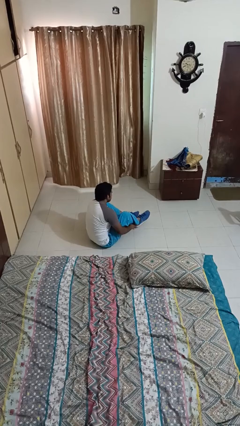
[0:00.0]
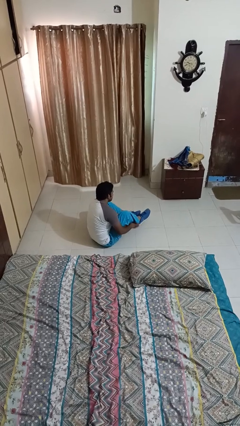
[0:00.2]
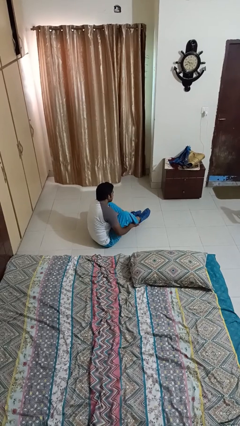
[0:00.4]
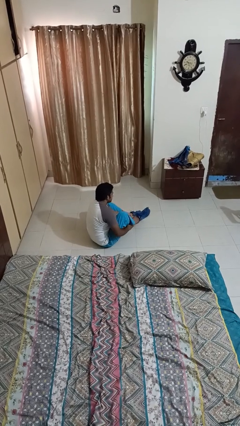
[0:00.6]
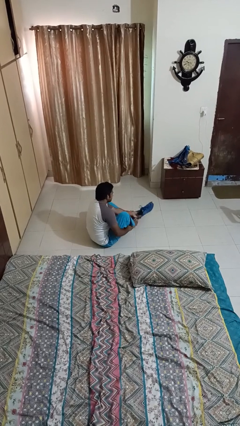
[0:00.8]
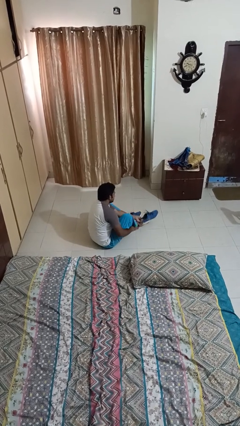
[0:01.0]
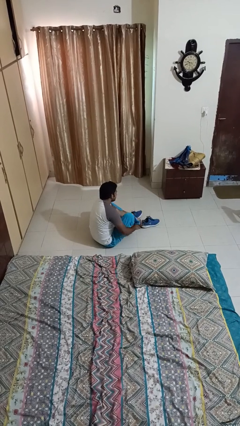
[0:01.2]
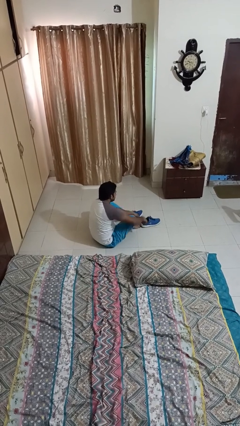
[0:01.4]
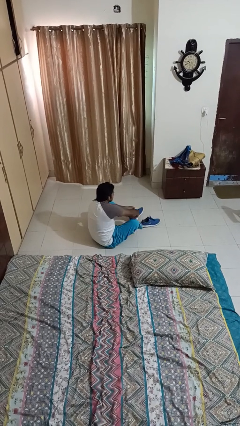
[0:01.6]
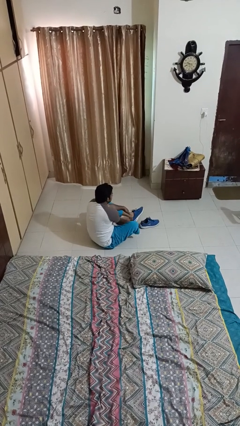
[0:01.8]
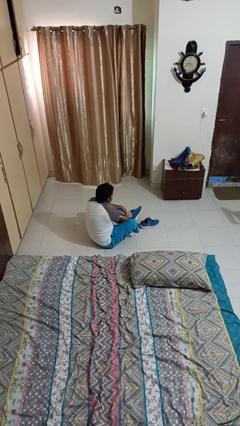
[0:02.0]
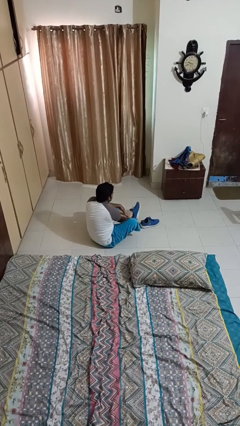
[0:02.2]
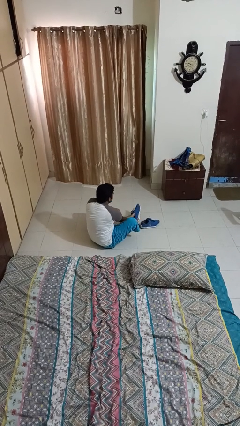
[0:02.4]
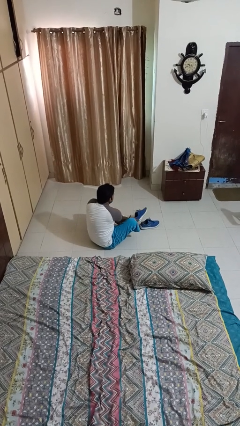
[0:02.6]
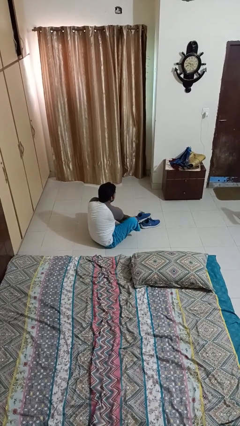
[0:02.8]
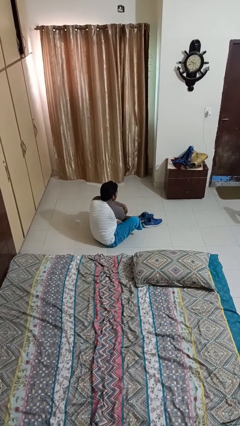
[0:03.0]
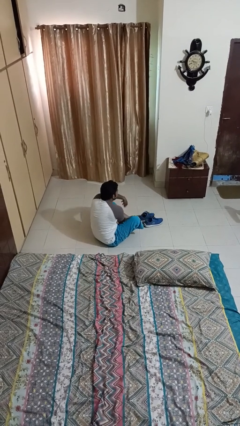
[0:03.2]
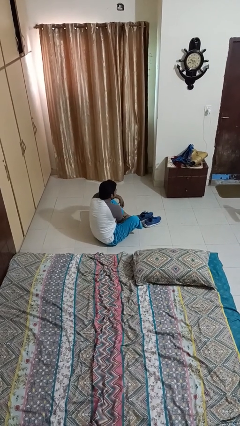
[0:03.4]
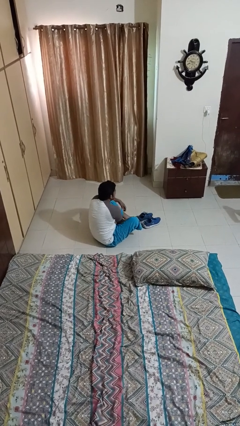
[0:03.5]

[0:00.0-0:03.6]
person takes off shoes

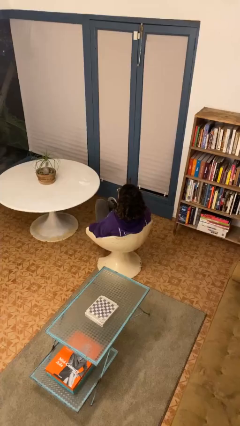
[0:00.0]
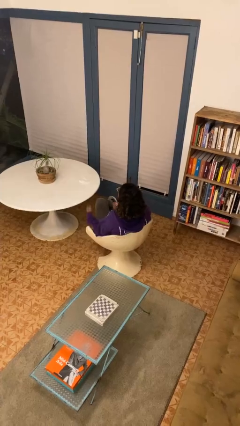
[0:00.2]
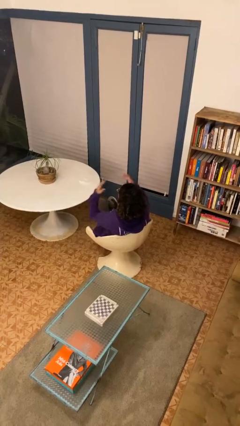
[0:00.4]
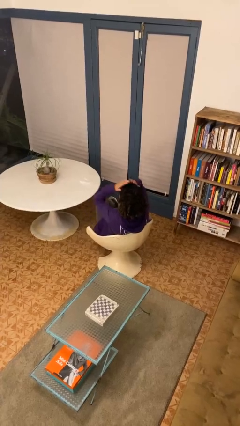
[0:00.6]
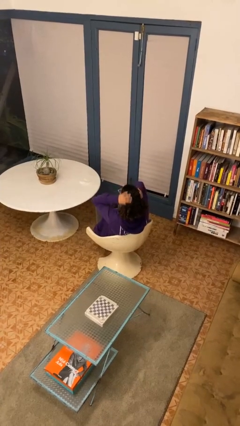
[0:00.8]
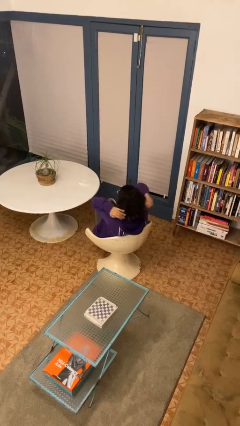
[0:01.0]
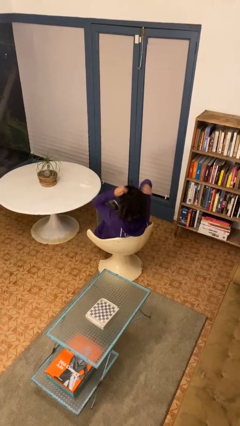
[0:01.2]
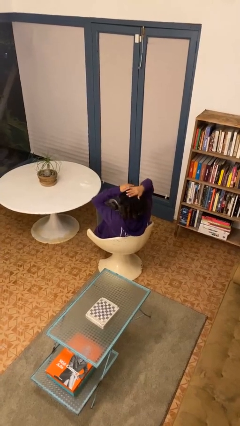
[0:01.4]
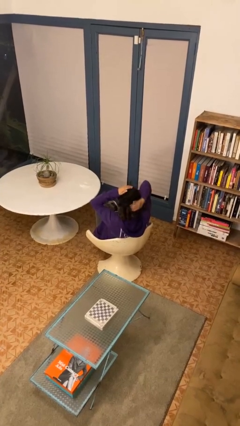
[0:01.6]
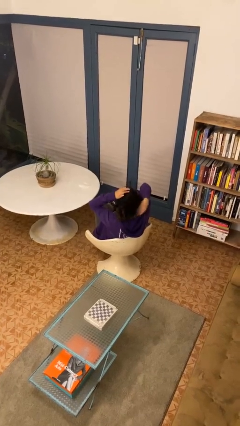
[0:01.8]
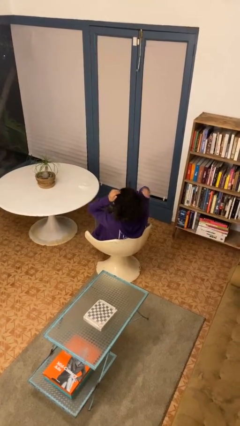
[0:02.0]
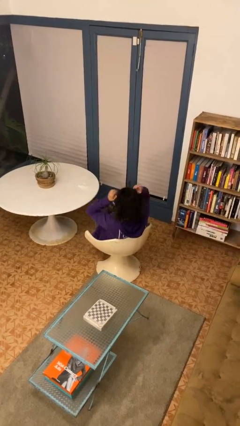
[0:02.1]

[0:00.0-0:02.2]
person strokes hair

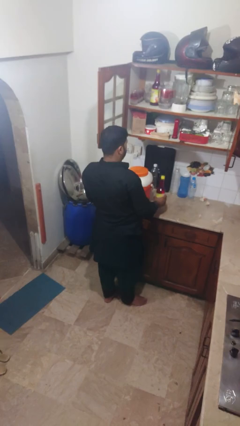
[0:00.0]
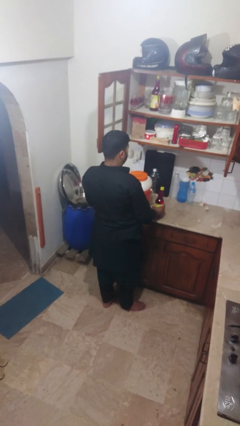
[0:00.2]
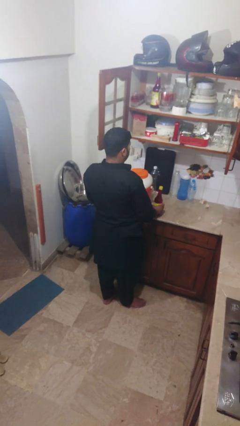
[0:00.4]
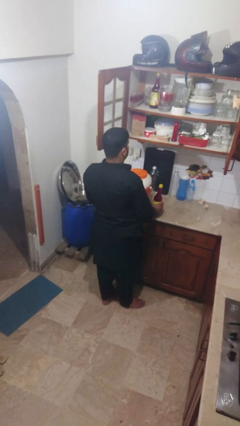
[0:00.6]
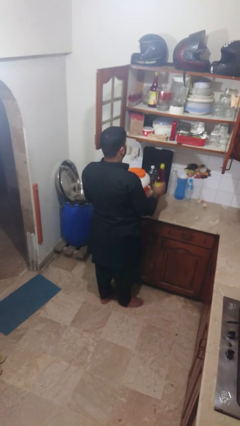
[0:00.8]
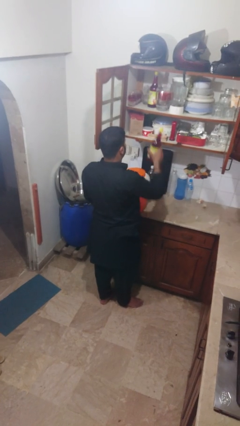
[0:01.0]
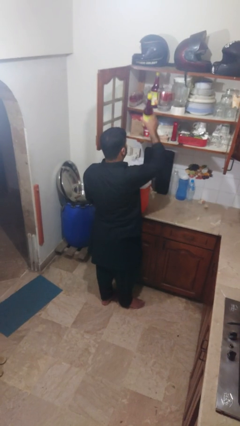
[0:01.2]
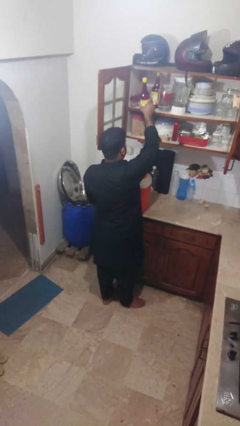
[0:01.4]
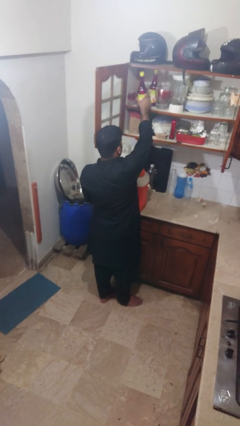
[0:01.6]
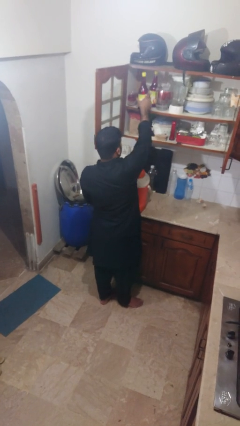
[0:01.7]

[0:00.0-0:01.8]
person puts down object into cabinet

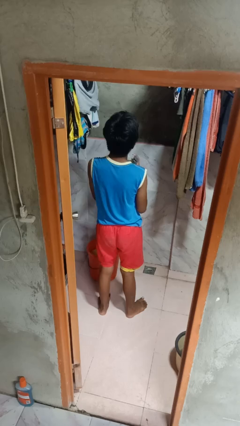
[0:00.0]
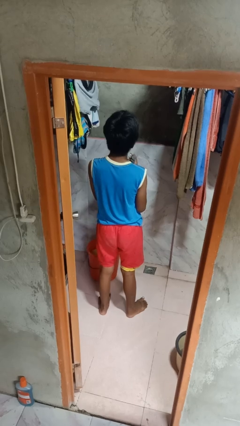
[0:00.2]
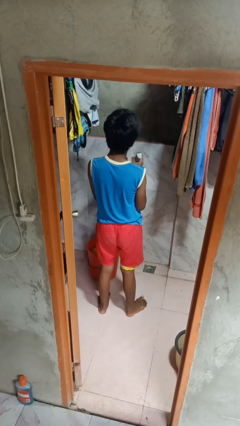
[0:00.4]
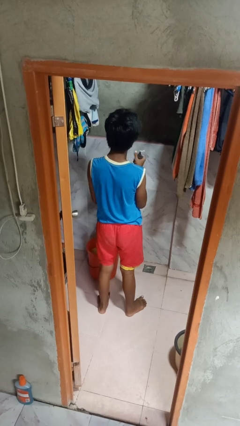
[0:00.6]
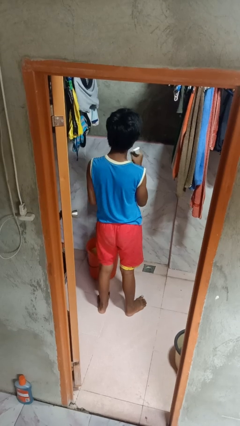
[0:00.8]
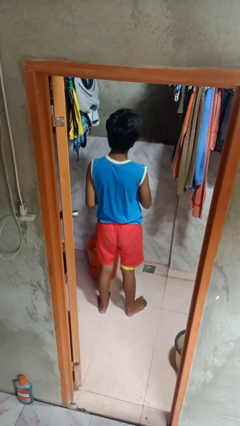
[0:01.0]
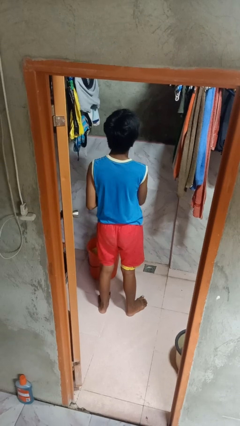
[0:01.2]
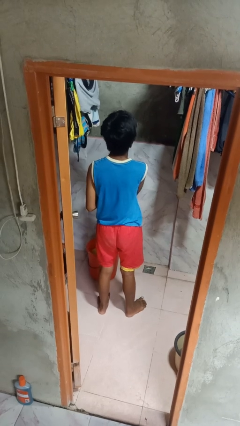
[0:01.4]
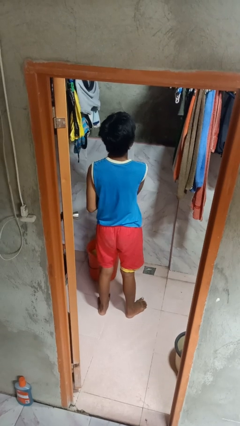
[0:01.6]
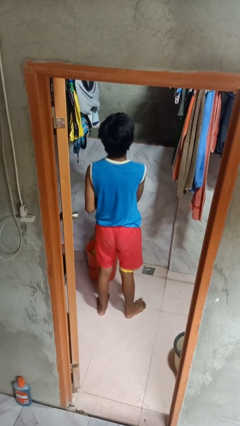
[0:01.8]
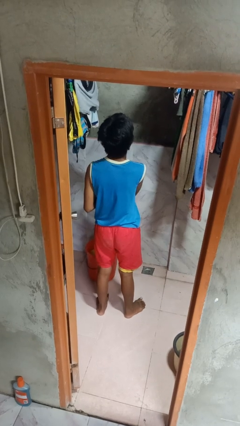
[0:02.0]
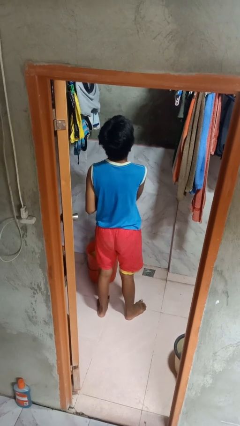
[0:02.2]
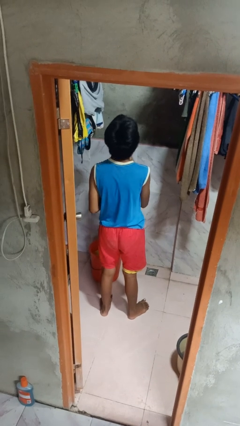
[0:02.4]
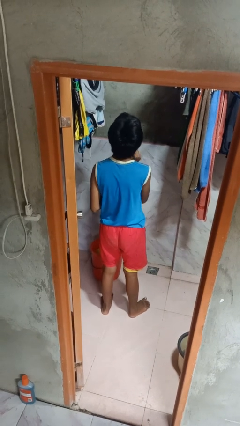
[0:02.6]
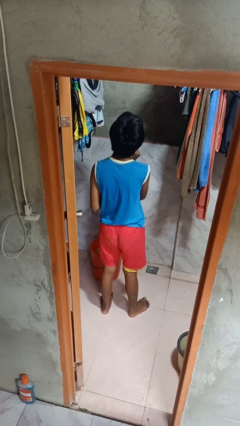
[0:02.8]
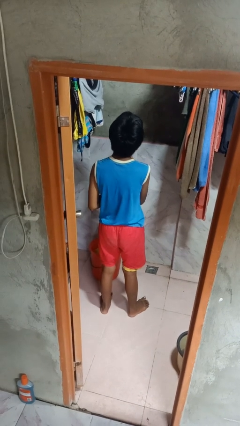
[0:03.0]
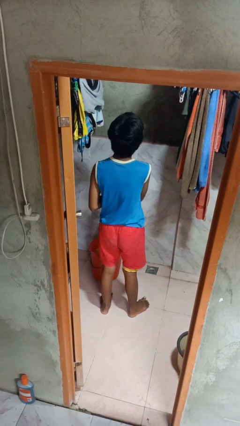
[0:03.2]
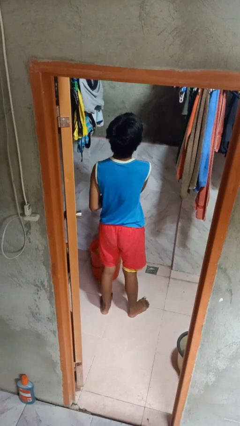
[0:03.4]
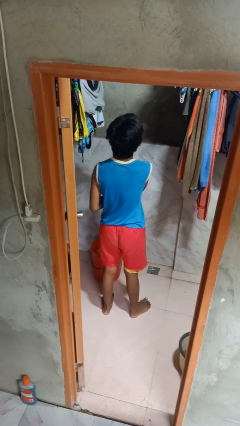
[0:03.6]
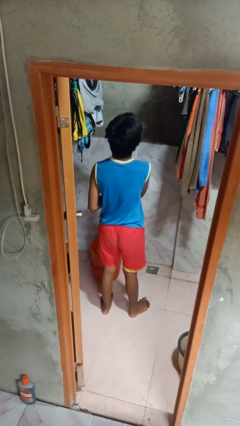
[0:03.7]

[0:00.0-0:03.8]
person shaves face

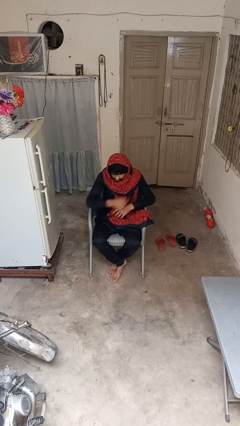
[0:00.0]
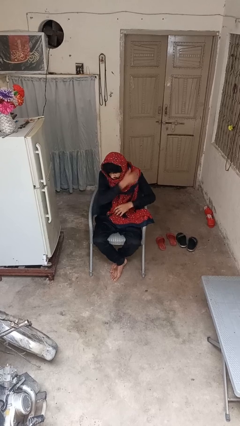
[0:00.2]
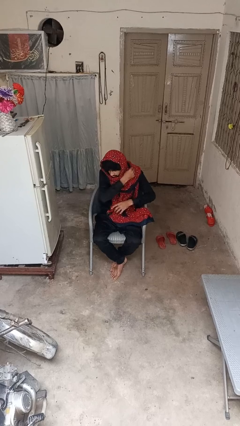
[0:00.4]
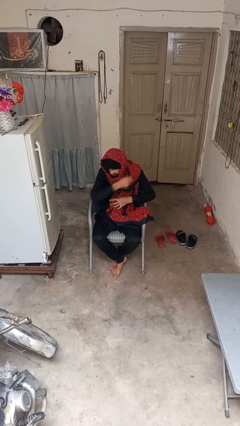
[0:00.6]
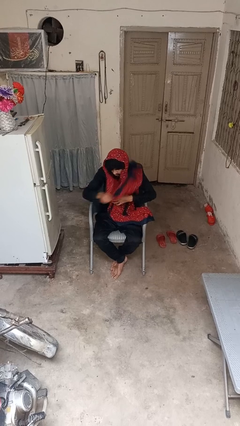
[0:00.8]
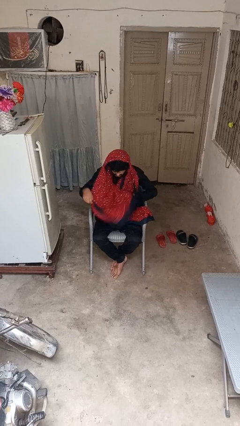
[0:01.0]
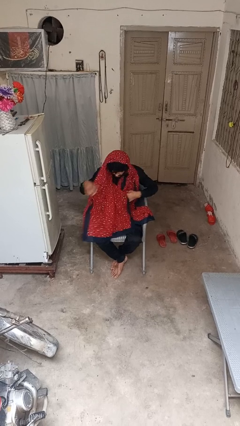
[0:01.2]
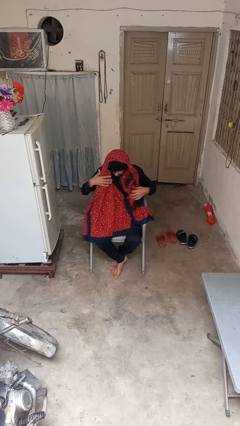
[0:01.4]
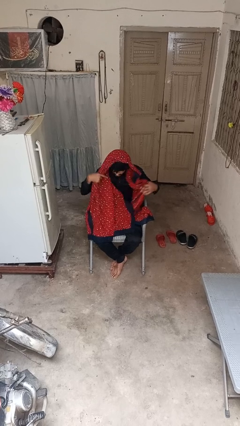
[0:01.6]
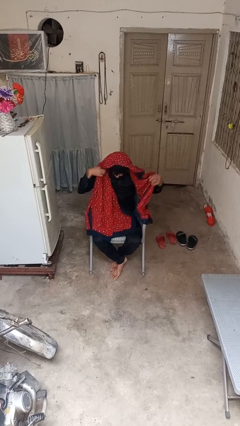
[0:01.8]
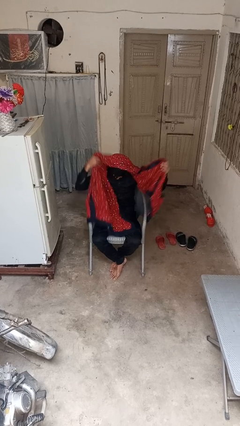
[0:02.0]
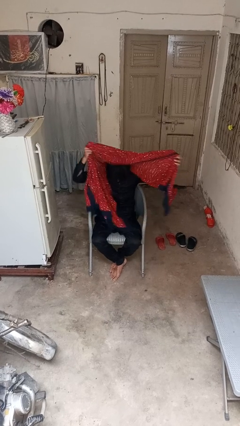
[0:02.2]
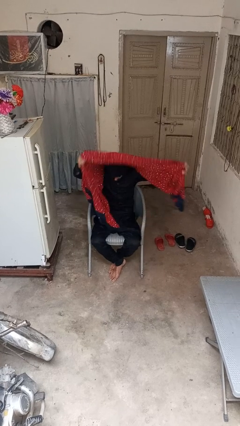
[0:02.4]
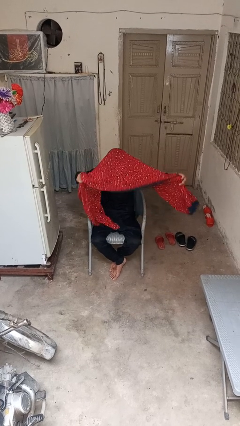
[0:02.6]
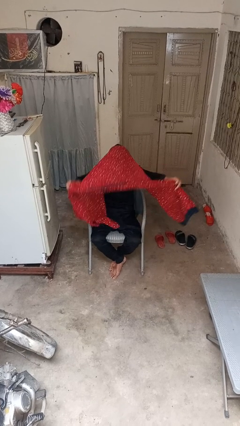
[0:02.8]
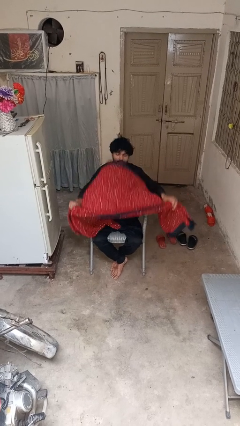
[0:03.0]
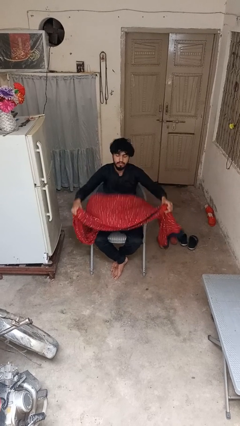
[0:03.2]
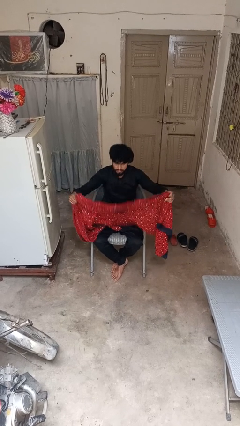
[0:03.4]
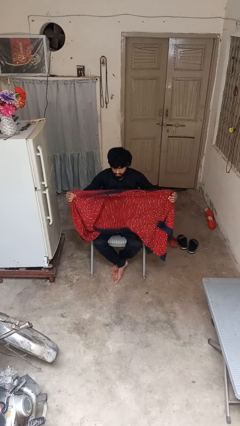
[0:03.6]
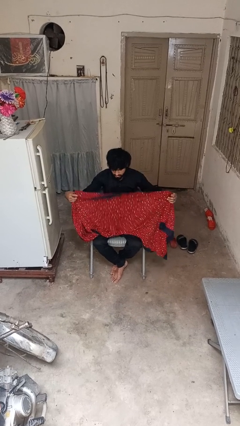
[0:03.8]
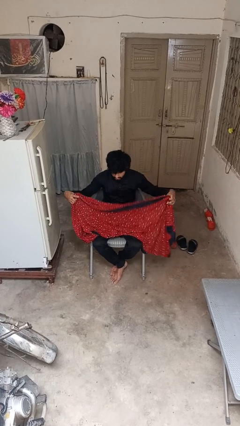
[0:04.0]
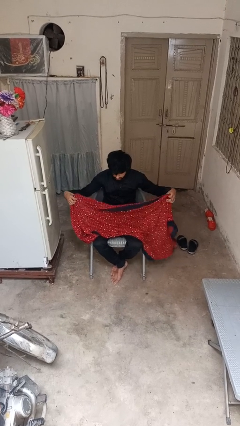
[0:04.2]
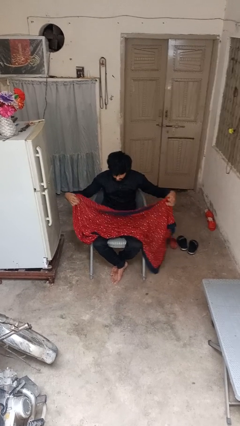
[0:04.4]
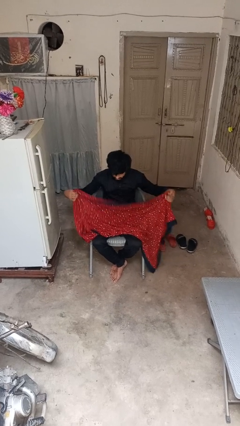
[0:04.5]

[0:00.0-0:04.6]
person takes off scarf

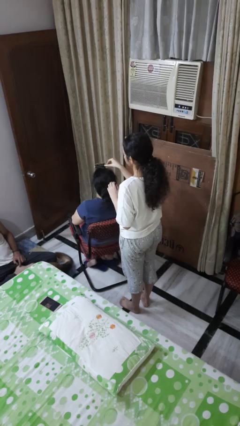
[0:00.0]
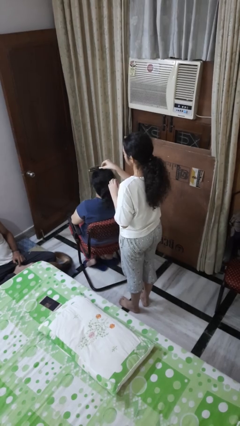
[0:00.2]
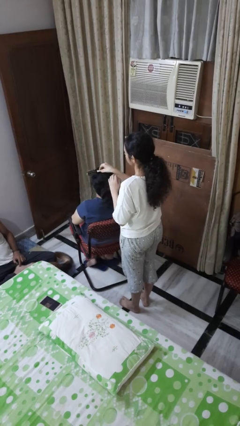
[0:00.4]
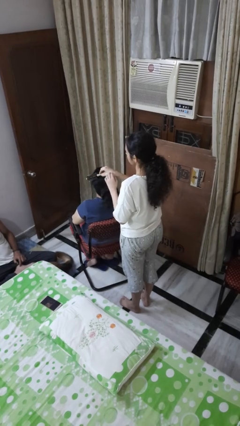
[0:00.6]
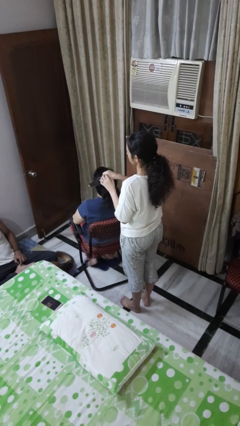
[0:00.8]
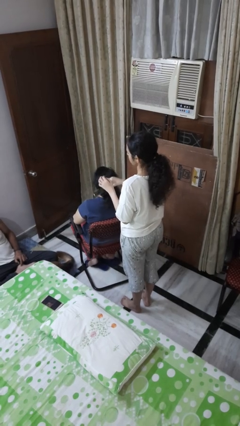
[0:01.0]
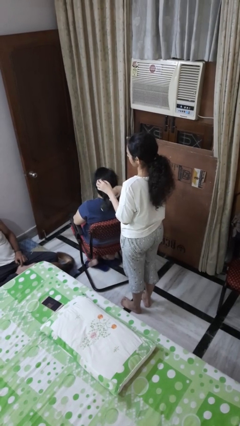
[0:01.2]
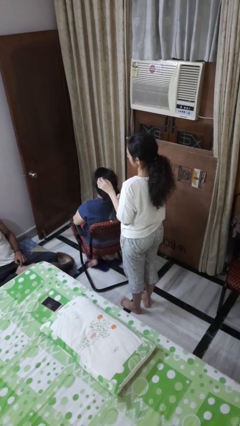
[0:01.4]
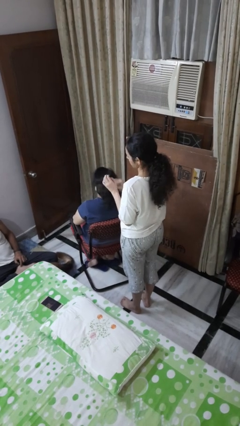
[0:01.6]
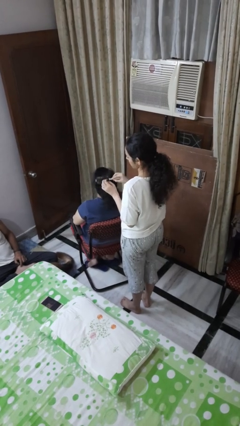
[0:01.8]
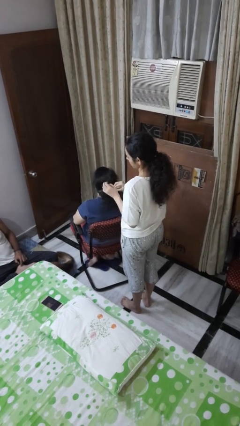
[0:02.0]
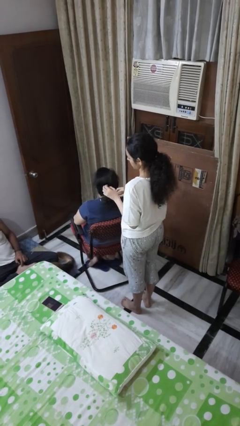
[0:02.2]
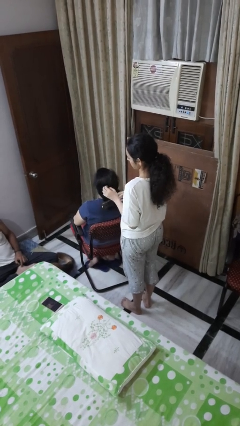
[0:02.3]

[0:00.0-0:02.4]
person brushes hair of person
